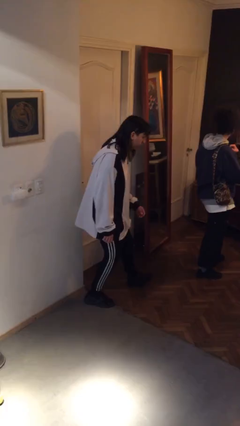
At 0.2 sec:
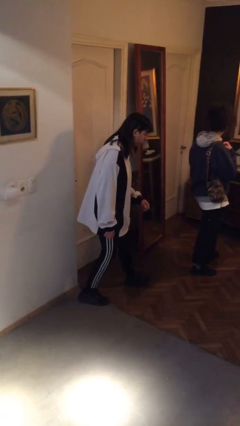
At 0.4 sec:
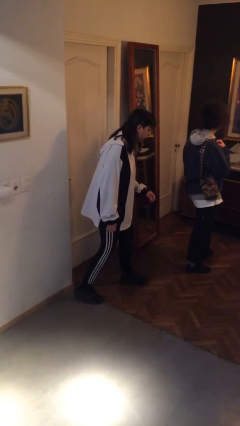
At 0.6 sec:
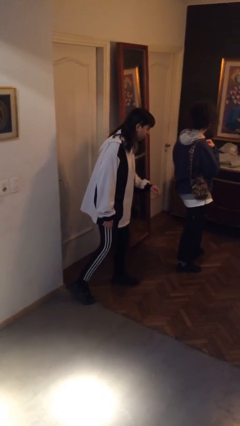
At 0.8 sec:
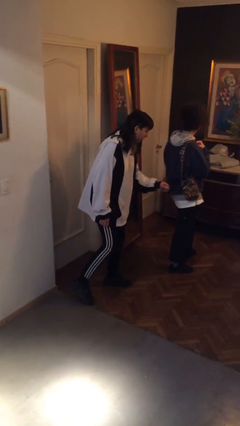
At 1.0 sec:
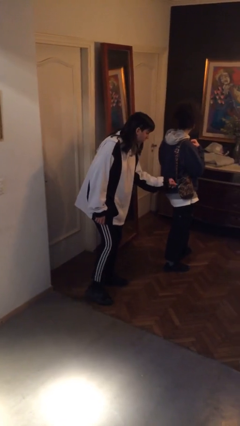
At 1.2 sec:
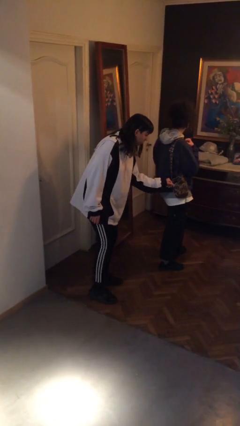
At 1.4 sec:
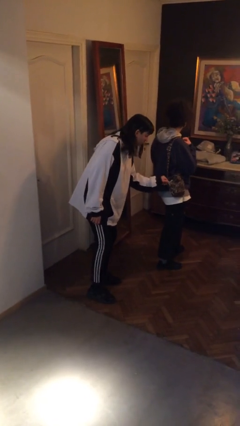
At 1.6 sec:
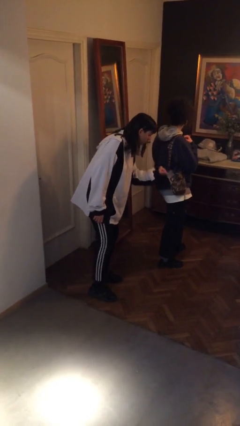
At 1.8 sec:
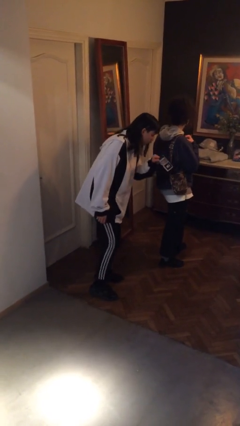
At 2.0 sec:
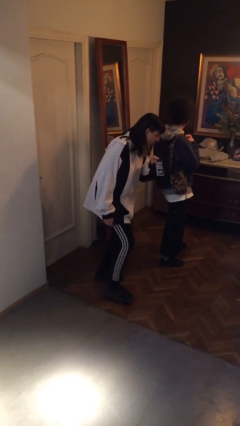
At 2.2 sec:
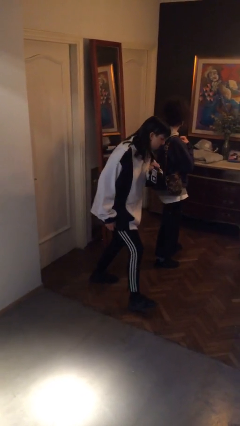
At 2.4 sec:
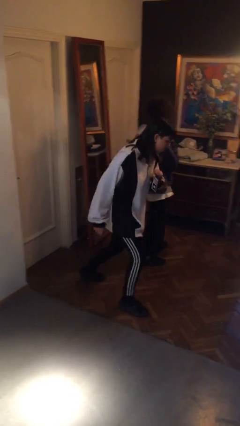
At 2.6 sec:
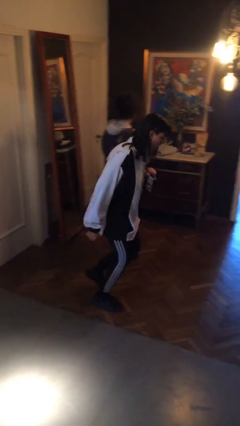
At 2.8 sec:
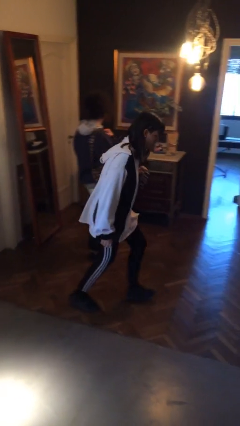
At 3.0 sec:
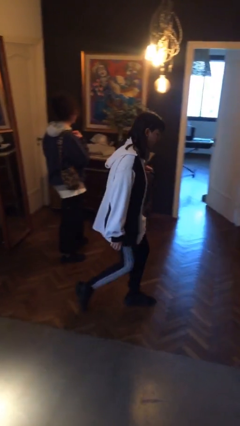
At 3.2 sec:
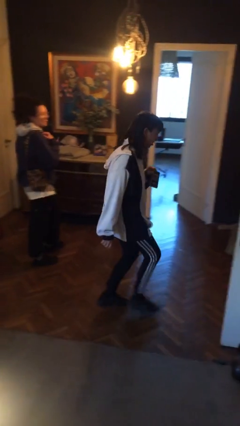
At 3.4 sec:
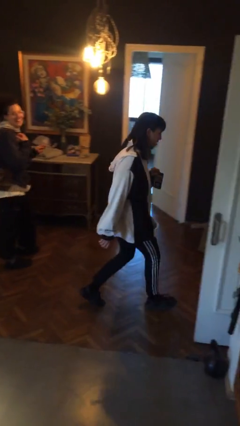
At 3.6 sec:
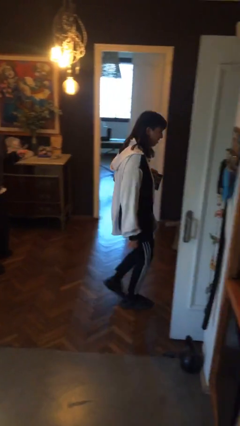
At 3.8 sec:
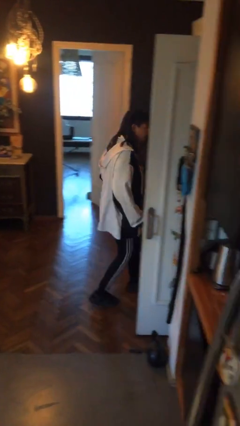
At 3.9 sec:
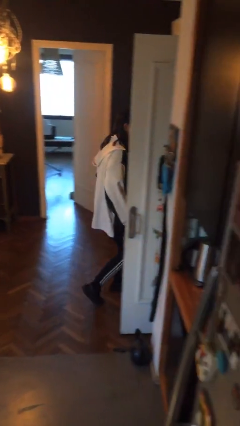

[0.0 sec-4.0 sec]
person steals object from person

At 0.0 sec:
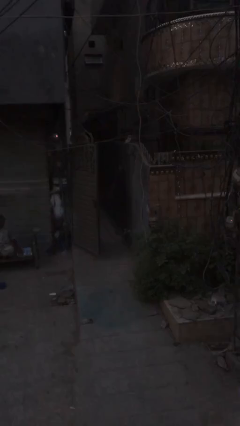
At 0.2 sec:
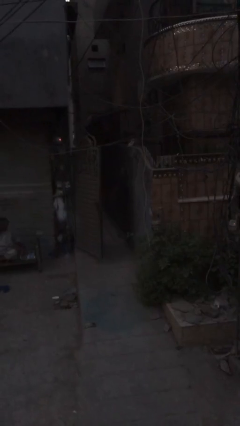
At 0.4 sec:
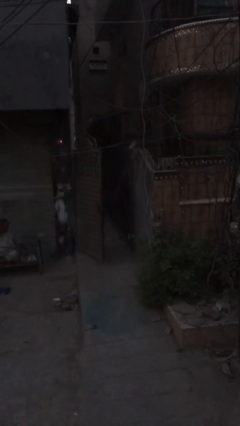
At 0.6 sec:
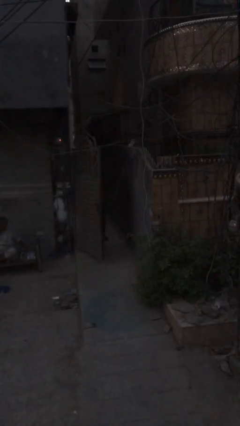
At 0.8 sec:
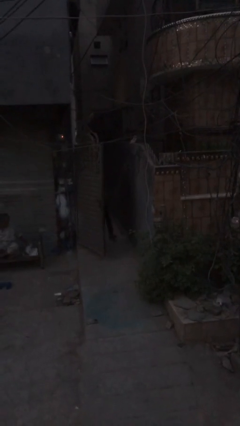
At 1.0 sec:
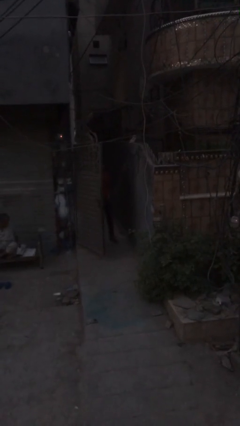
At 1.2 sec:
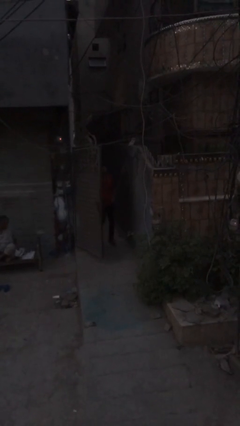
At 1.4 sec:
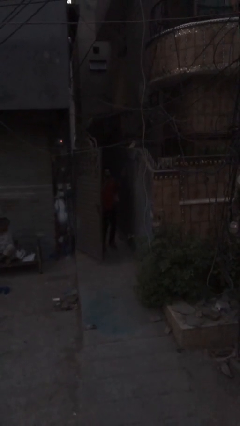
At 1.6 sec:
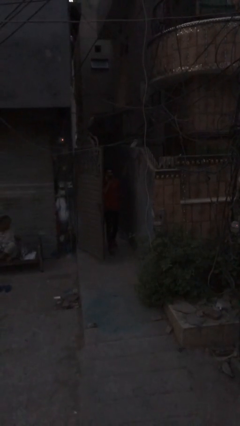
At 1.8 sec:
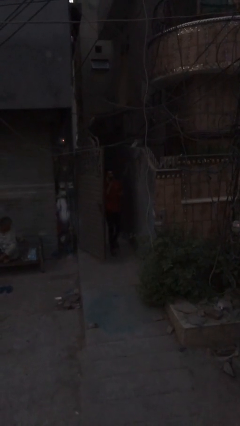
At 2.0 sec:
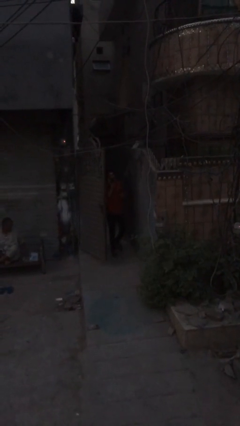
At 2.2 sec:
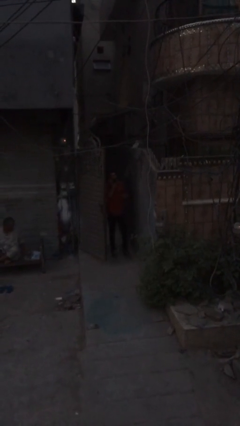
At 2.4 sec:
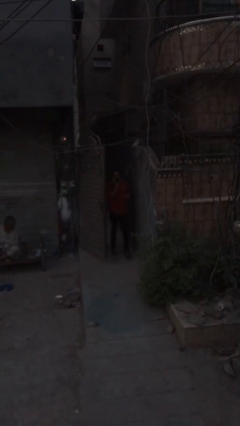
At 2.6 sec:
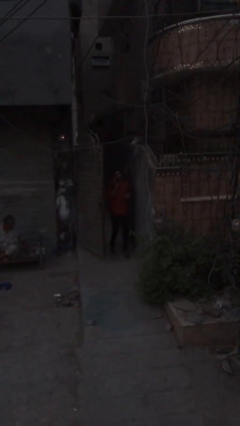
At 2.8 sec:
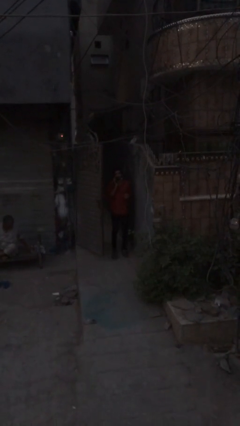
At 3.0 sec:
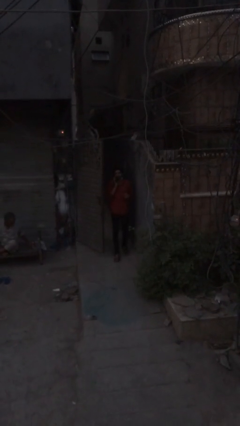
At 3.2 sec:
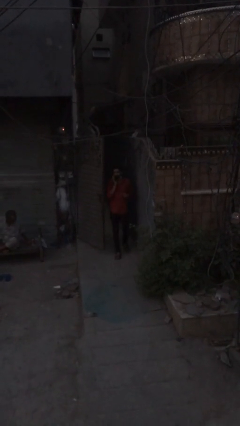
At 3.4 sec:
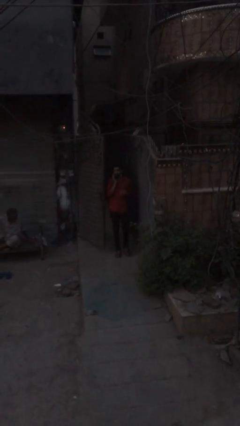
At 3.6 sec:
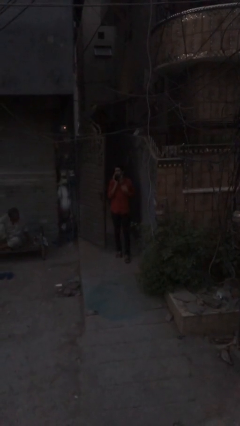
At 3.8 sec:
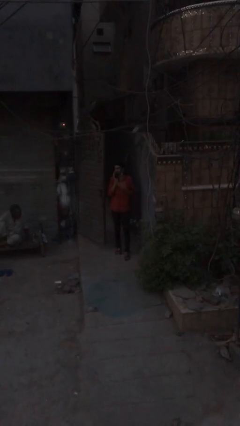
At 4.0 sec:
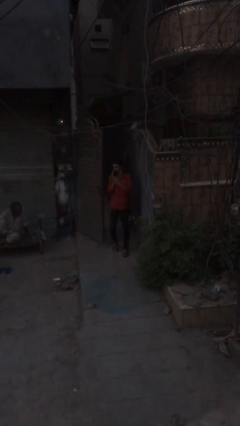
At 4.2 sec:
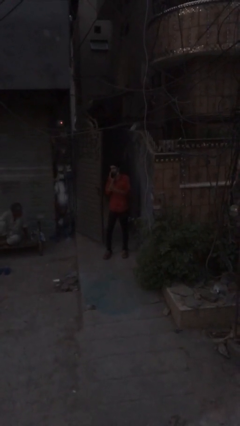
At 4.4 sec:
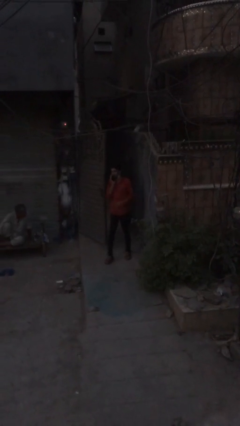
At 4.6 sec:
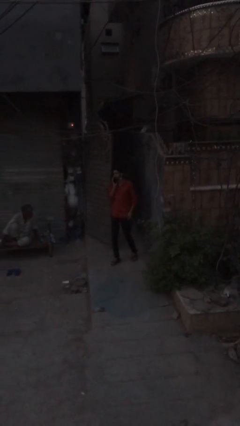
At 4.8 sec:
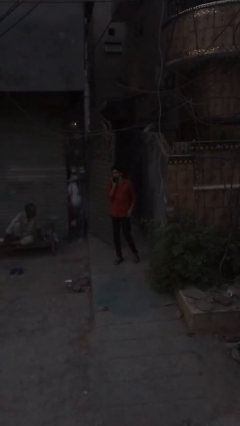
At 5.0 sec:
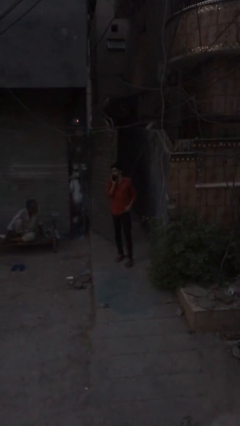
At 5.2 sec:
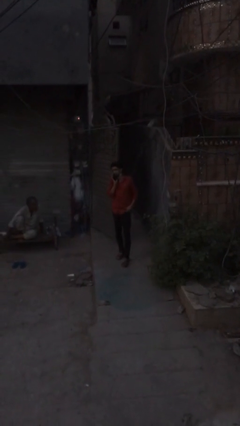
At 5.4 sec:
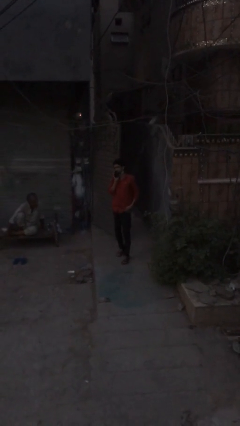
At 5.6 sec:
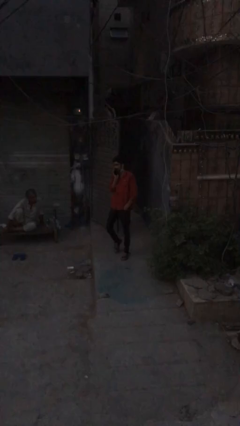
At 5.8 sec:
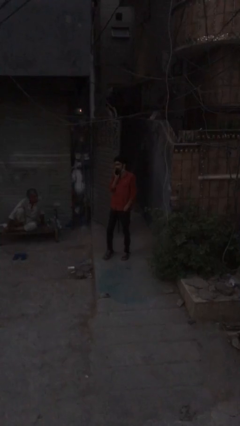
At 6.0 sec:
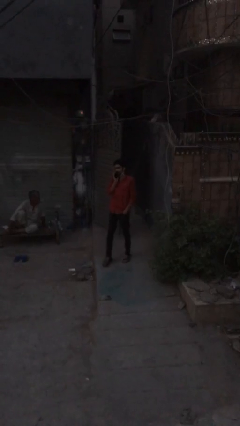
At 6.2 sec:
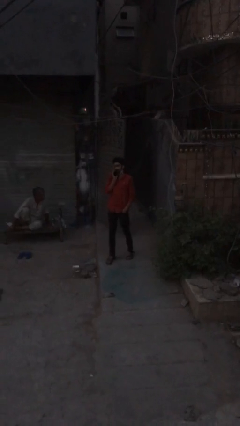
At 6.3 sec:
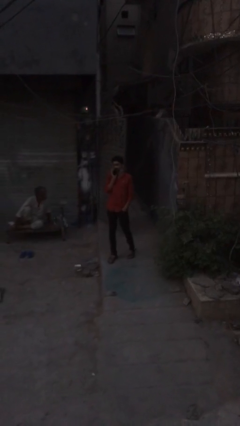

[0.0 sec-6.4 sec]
person enters scene through structure

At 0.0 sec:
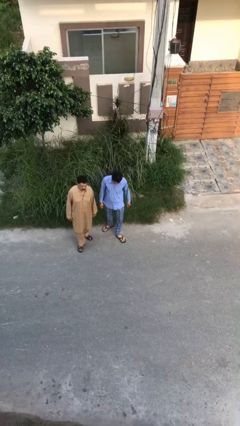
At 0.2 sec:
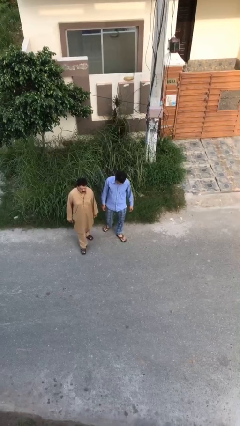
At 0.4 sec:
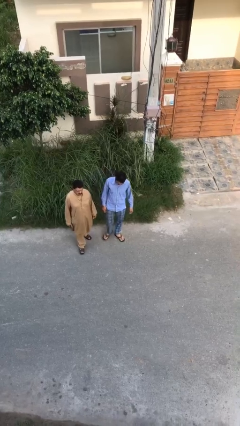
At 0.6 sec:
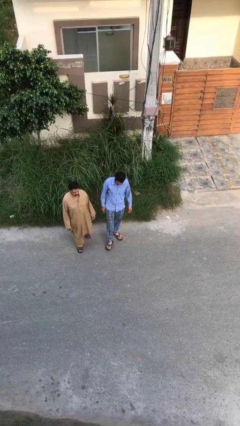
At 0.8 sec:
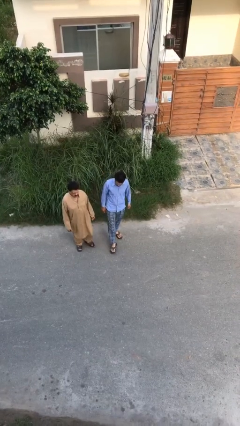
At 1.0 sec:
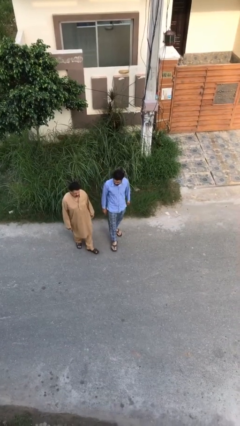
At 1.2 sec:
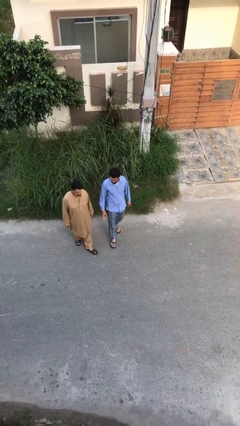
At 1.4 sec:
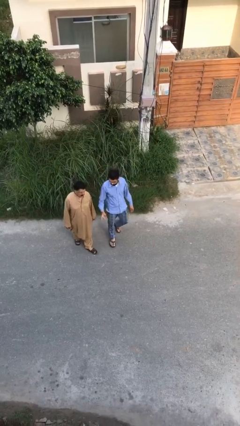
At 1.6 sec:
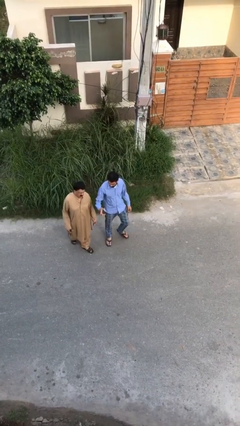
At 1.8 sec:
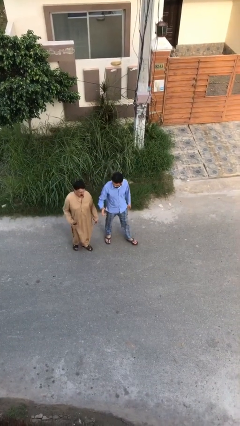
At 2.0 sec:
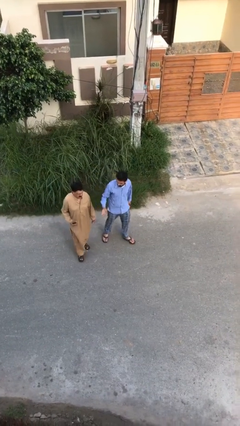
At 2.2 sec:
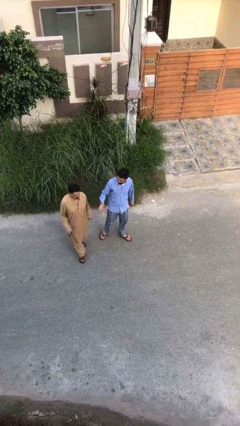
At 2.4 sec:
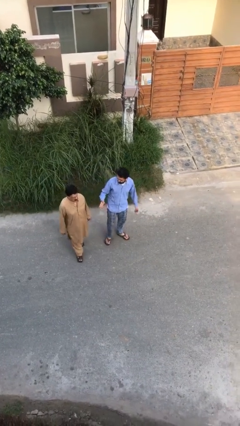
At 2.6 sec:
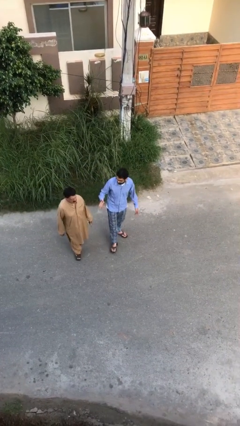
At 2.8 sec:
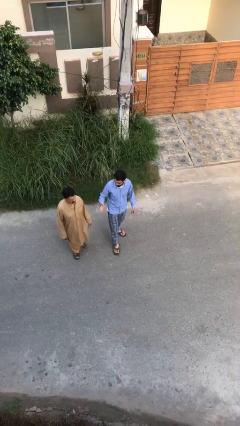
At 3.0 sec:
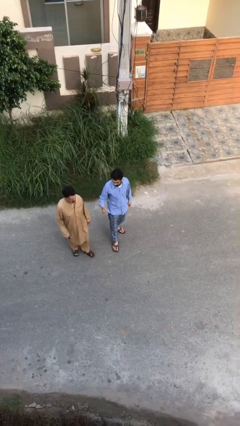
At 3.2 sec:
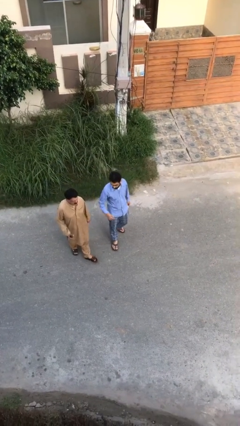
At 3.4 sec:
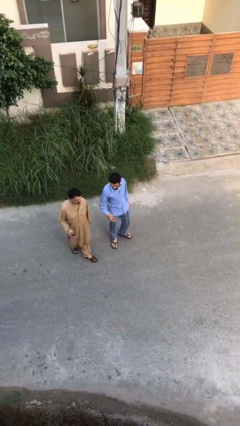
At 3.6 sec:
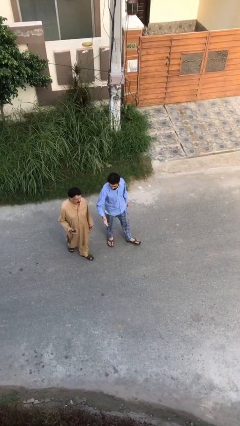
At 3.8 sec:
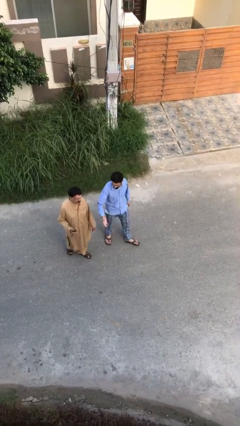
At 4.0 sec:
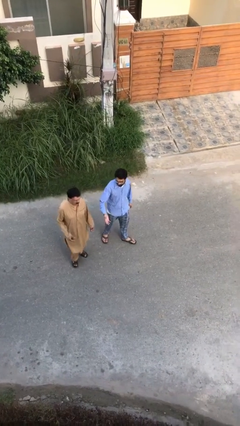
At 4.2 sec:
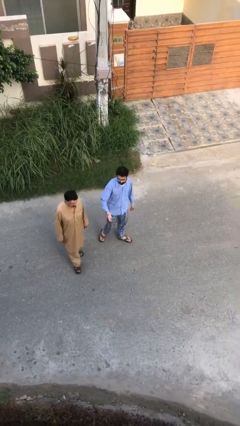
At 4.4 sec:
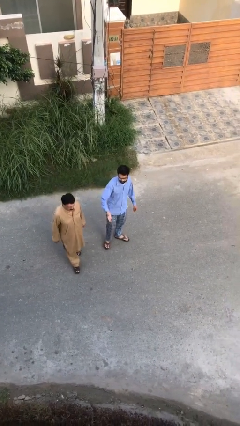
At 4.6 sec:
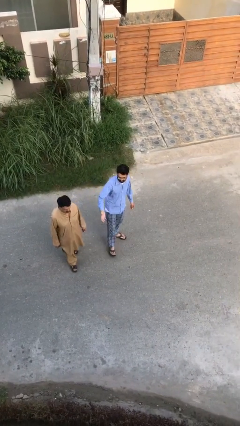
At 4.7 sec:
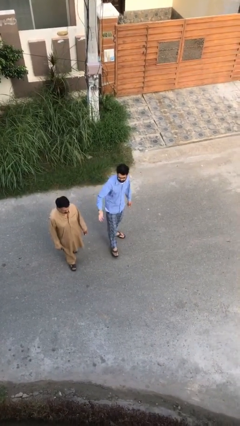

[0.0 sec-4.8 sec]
person talks to person

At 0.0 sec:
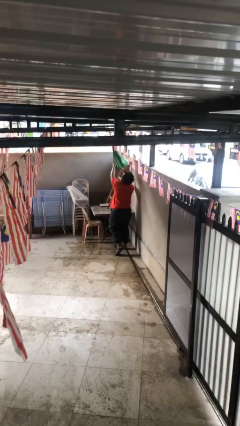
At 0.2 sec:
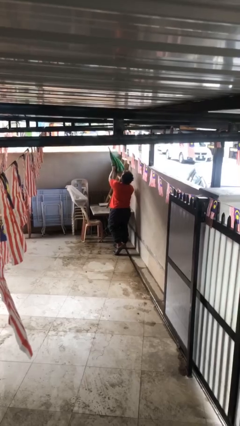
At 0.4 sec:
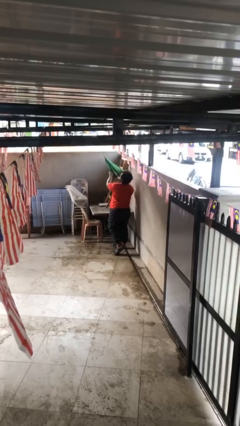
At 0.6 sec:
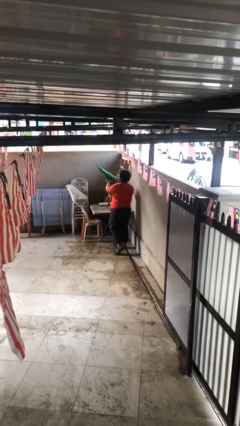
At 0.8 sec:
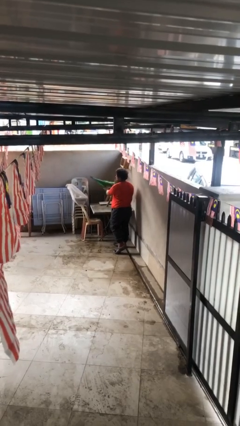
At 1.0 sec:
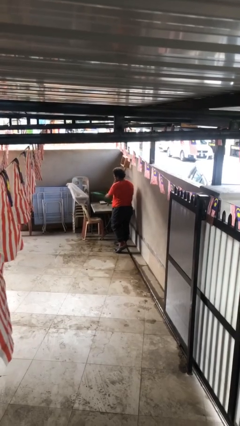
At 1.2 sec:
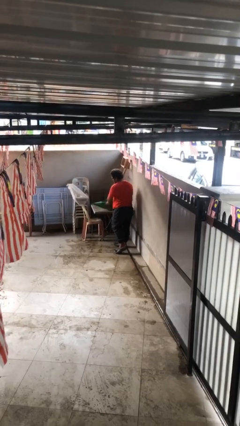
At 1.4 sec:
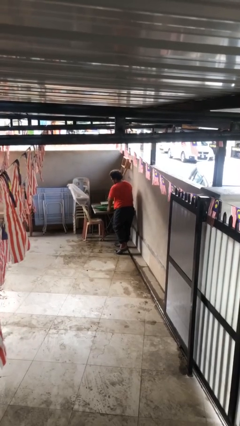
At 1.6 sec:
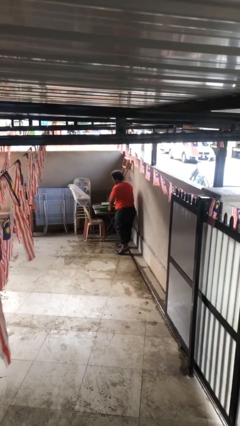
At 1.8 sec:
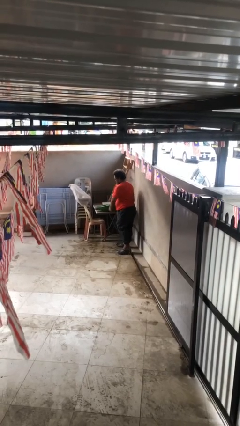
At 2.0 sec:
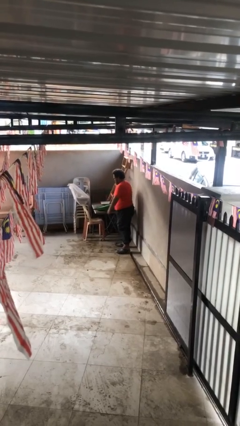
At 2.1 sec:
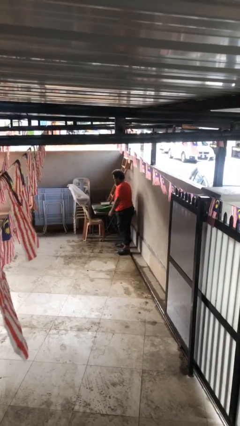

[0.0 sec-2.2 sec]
person puts down object on table

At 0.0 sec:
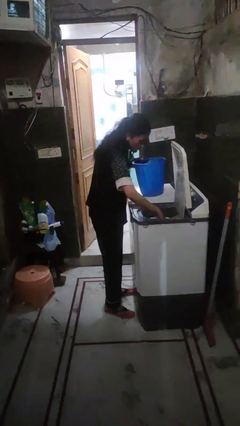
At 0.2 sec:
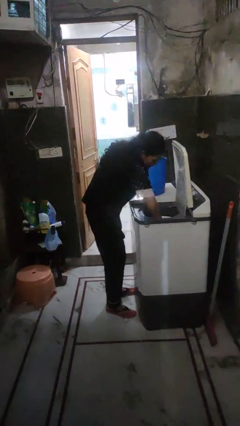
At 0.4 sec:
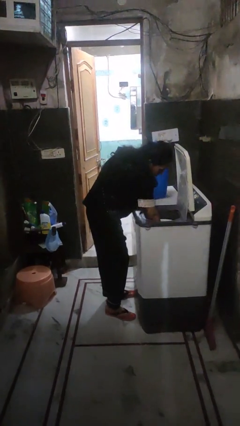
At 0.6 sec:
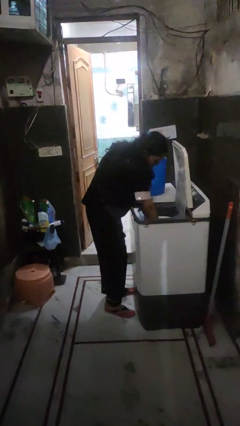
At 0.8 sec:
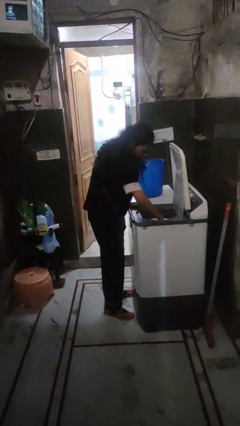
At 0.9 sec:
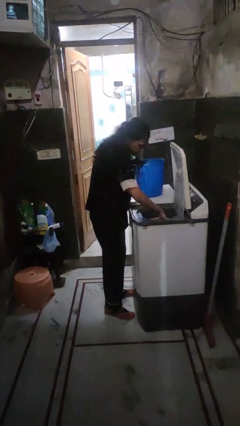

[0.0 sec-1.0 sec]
person loads dryer
